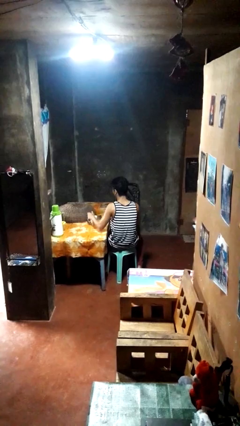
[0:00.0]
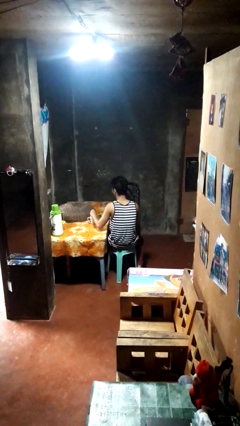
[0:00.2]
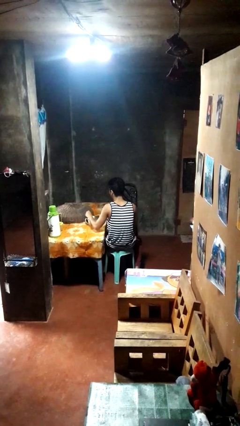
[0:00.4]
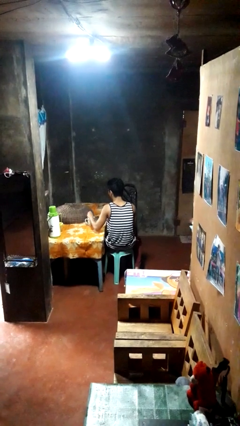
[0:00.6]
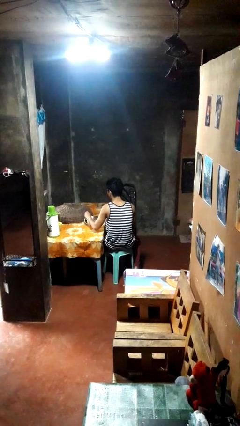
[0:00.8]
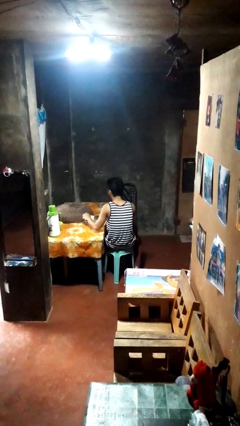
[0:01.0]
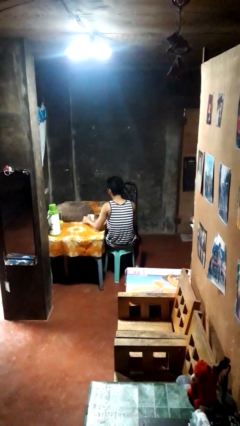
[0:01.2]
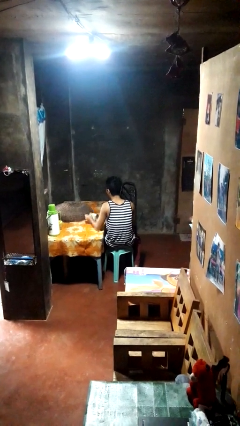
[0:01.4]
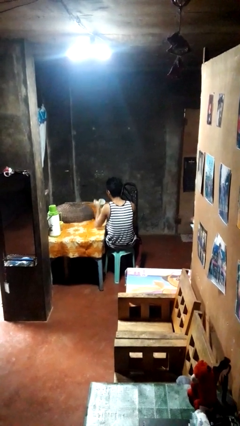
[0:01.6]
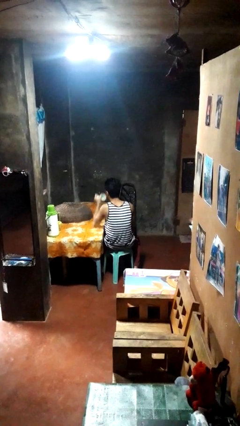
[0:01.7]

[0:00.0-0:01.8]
person stirs mug

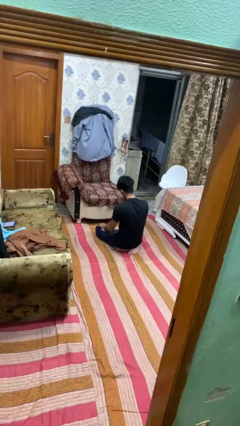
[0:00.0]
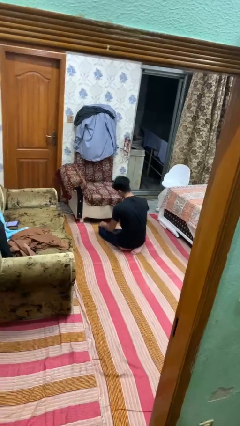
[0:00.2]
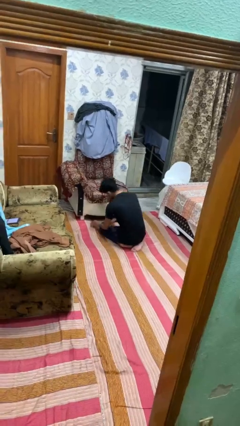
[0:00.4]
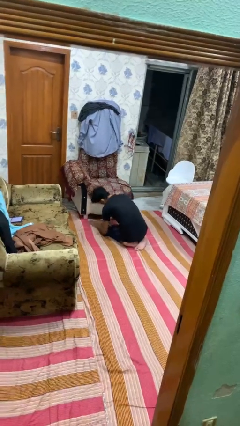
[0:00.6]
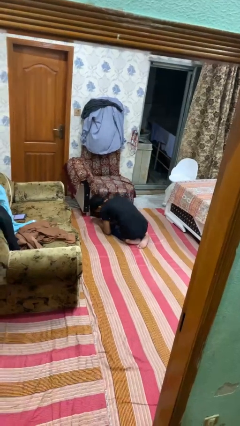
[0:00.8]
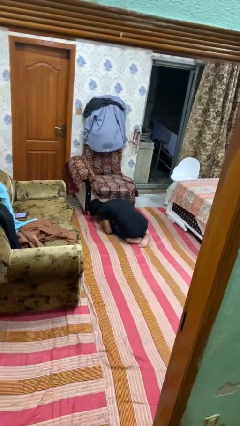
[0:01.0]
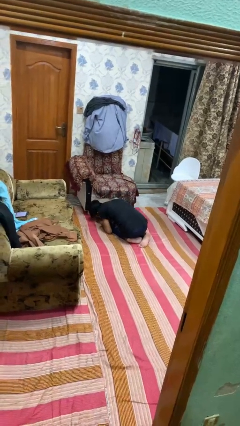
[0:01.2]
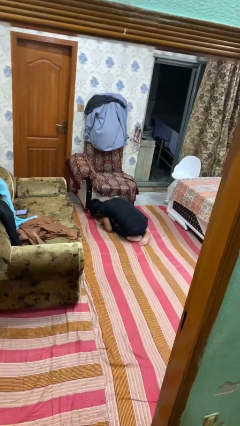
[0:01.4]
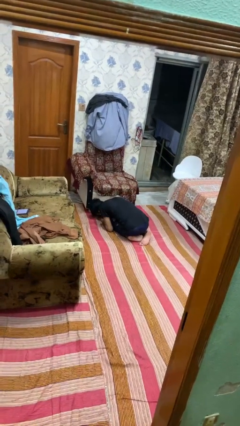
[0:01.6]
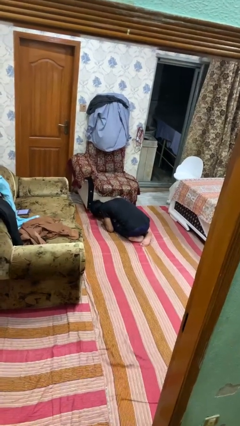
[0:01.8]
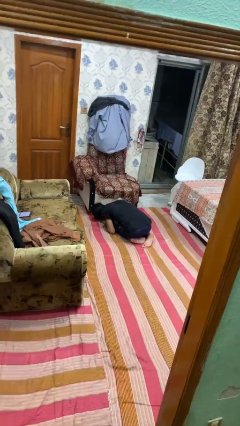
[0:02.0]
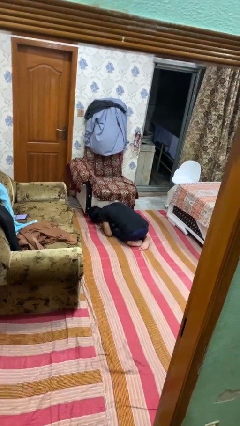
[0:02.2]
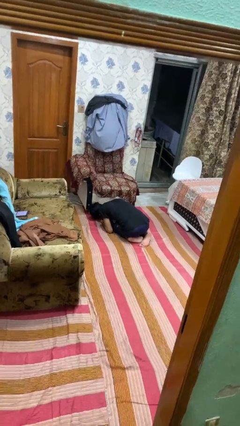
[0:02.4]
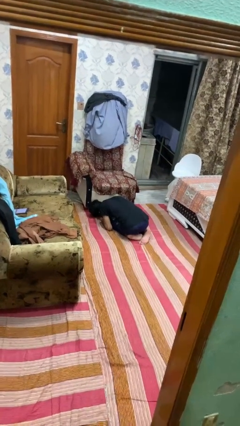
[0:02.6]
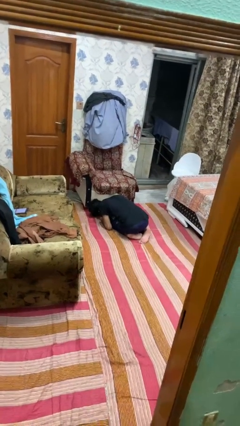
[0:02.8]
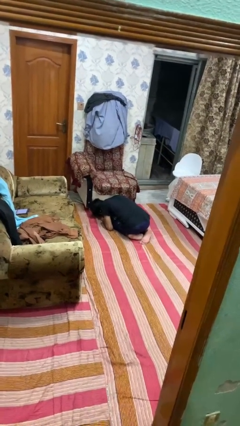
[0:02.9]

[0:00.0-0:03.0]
person searches under couch

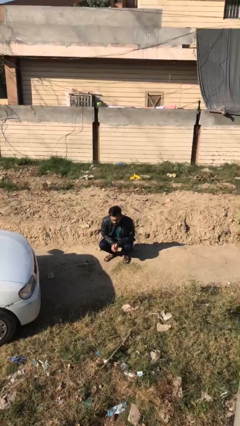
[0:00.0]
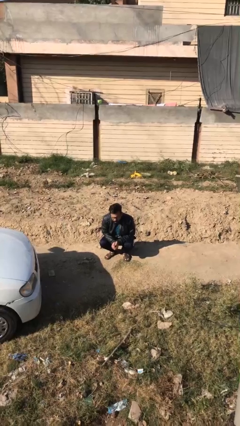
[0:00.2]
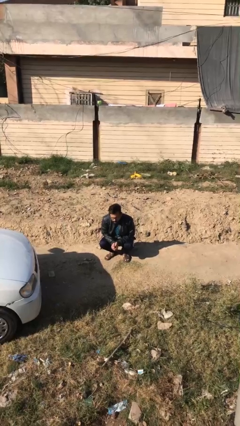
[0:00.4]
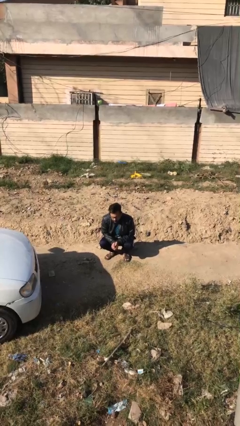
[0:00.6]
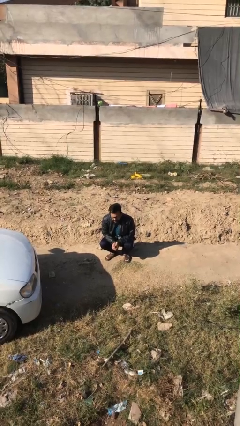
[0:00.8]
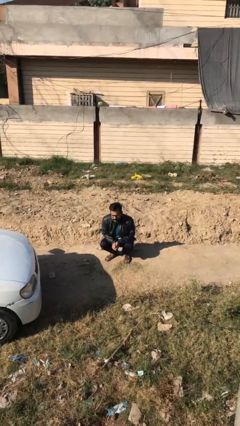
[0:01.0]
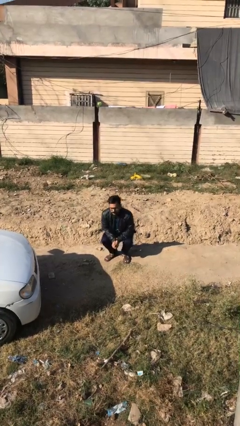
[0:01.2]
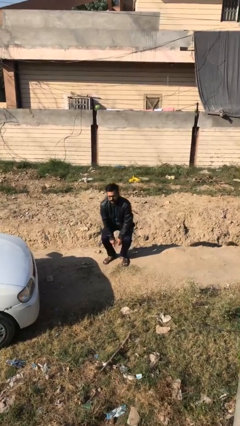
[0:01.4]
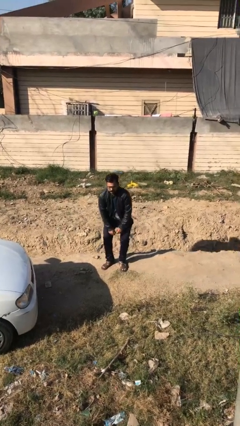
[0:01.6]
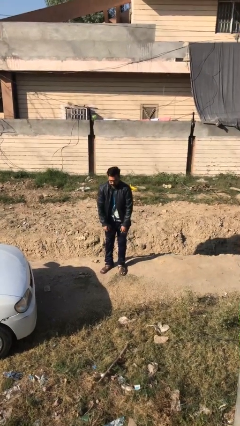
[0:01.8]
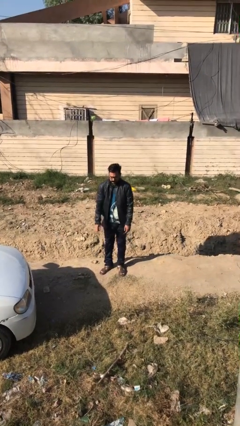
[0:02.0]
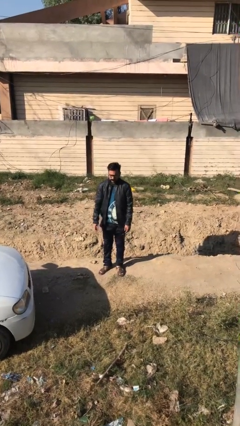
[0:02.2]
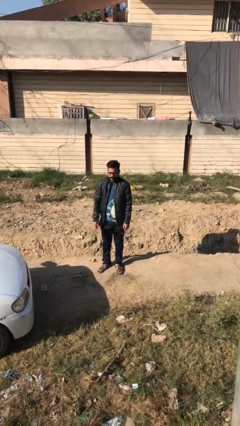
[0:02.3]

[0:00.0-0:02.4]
person stands up

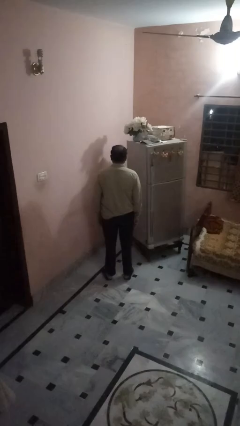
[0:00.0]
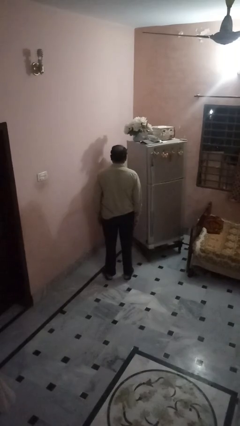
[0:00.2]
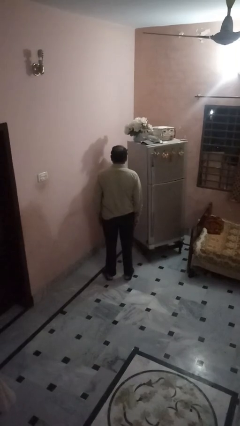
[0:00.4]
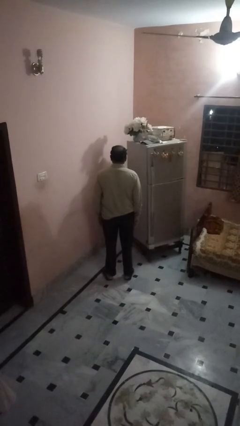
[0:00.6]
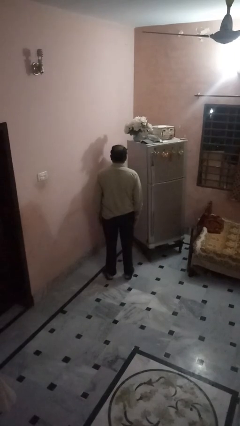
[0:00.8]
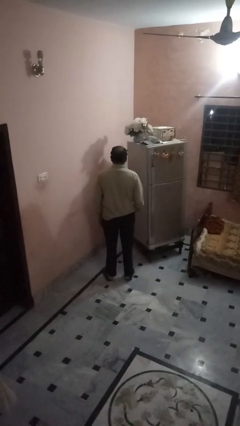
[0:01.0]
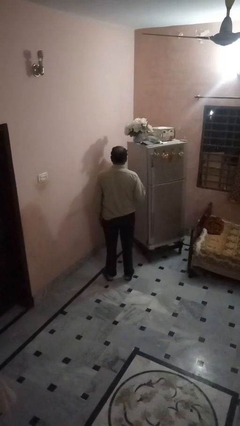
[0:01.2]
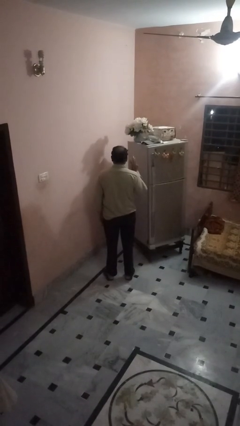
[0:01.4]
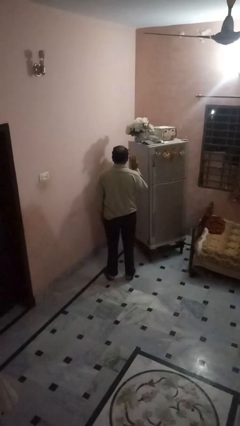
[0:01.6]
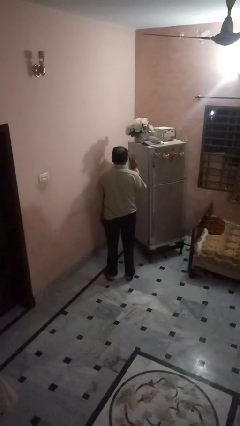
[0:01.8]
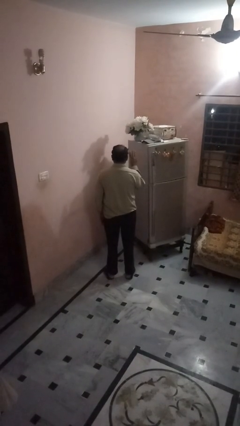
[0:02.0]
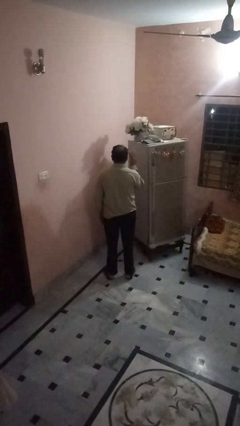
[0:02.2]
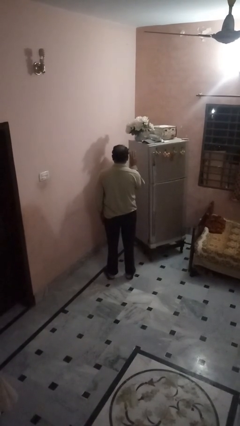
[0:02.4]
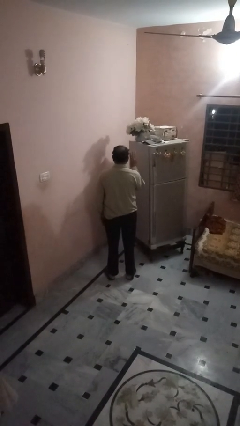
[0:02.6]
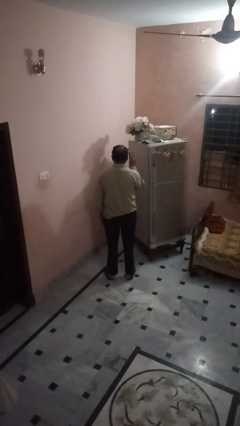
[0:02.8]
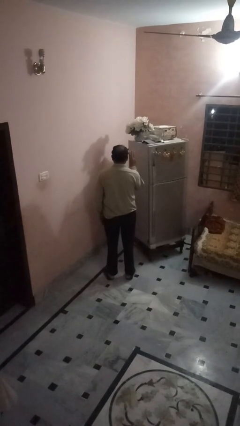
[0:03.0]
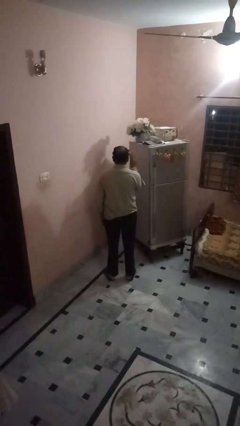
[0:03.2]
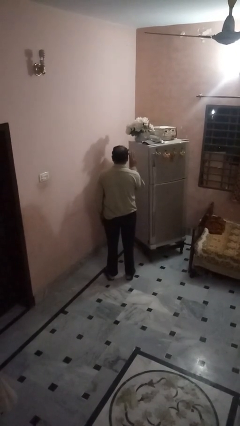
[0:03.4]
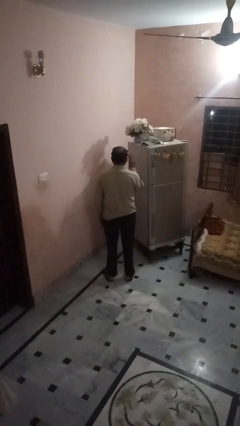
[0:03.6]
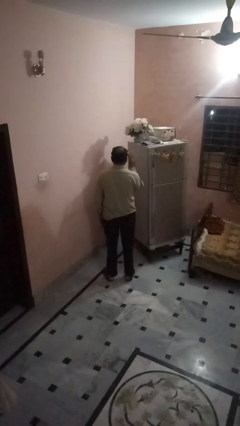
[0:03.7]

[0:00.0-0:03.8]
person gestures number three

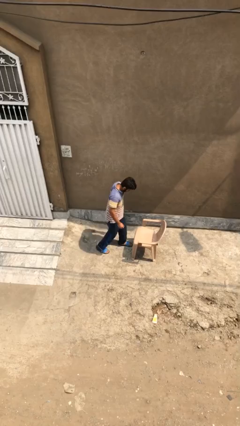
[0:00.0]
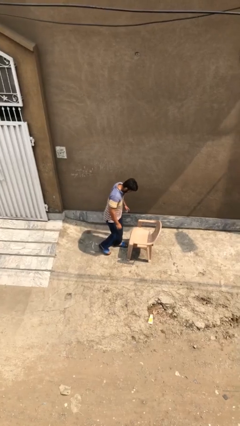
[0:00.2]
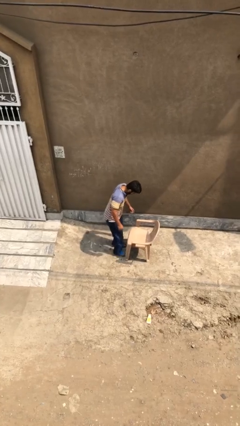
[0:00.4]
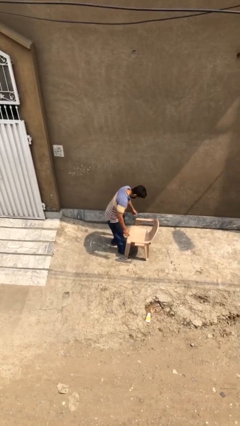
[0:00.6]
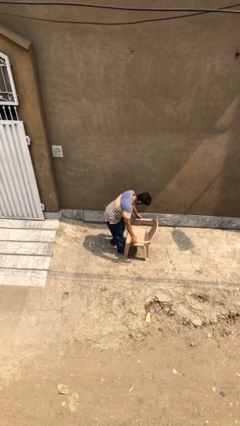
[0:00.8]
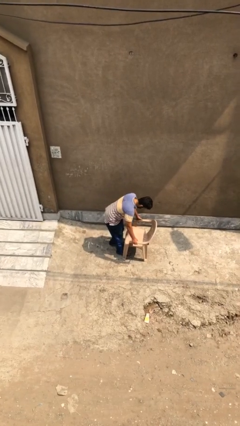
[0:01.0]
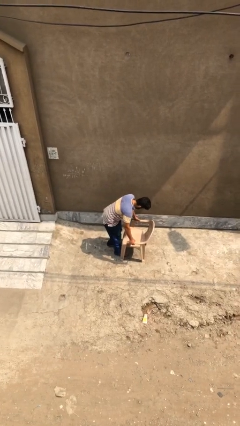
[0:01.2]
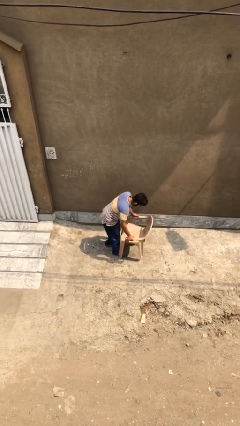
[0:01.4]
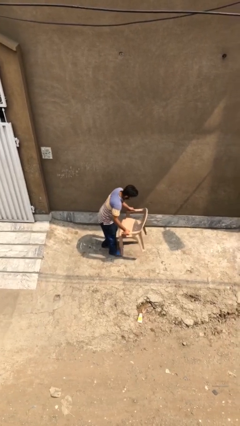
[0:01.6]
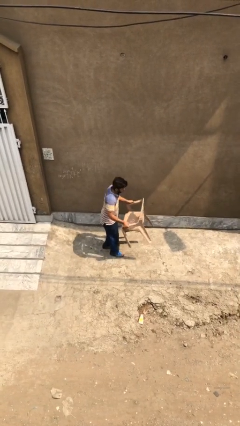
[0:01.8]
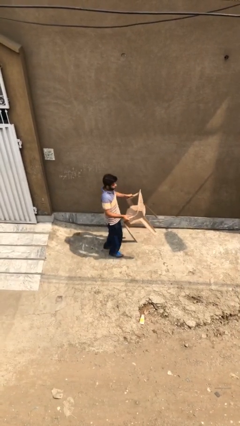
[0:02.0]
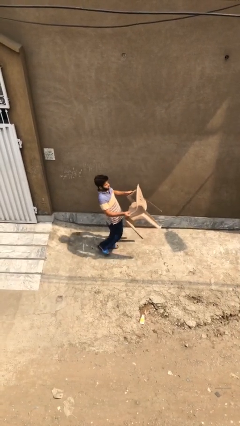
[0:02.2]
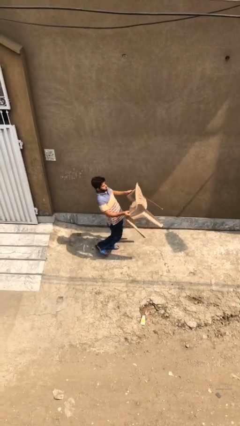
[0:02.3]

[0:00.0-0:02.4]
person picks up object from floor

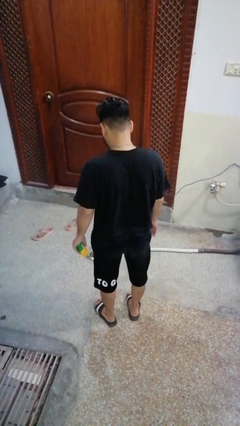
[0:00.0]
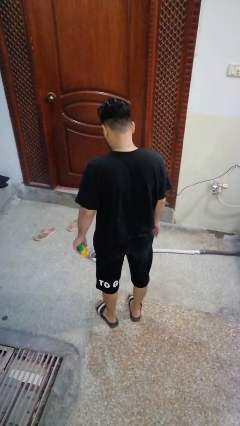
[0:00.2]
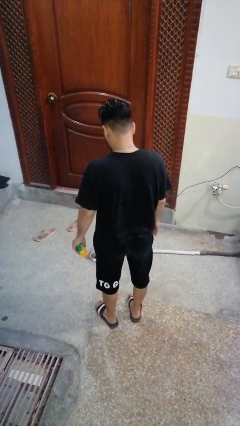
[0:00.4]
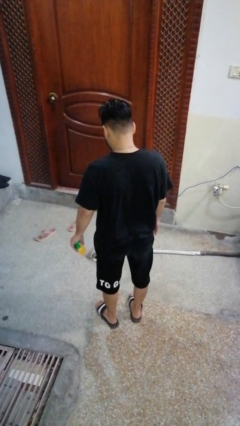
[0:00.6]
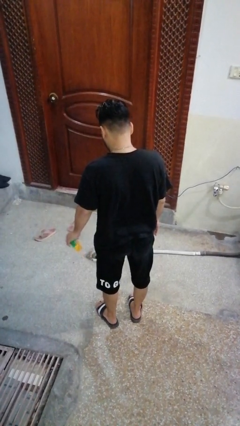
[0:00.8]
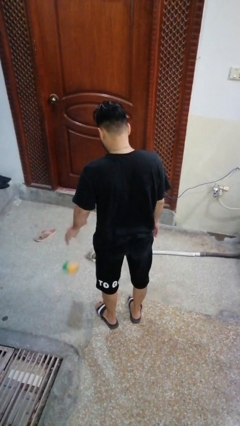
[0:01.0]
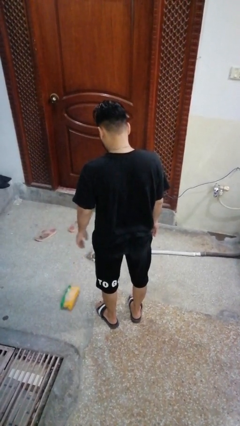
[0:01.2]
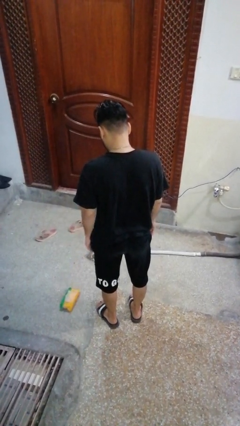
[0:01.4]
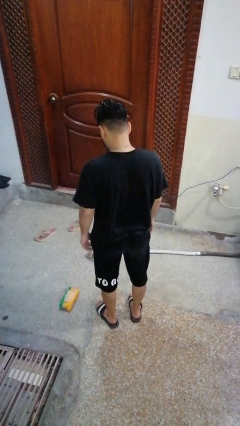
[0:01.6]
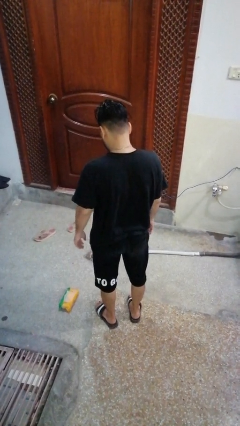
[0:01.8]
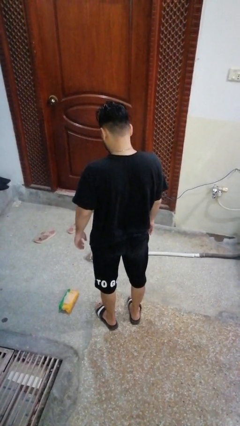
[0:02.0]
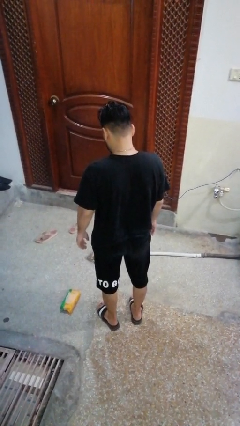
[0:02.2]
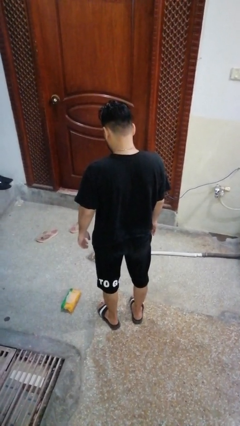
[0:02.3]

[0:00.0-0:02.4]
person drops object

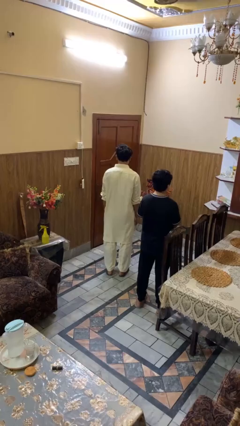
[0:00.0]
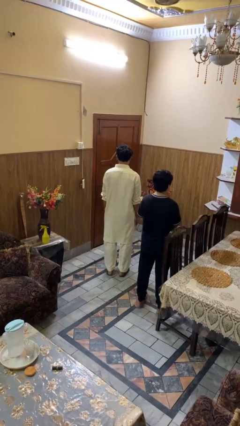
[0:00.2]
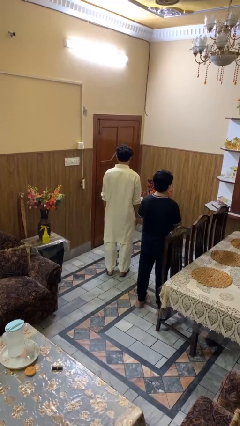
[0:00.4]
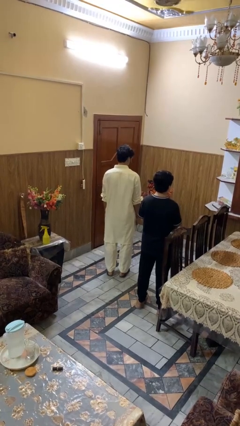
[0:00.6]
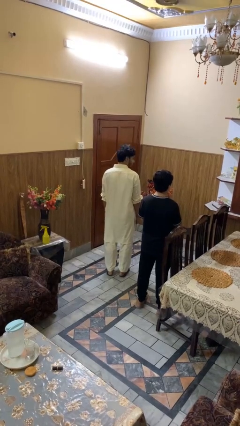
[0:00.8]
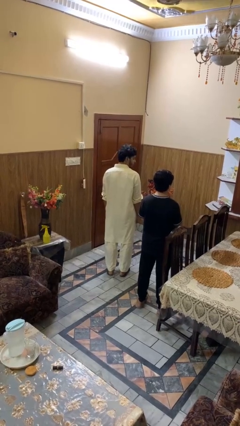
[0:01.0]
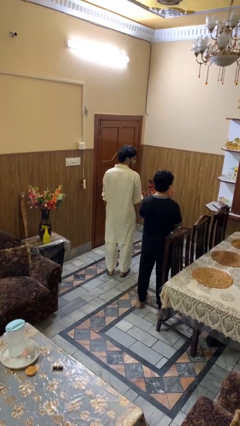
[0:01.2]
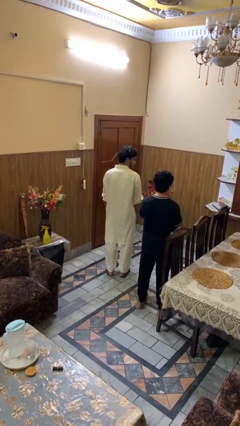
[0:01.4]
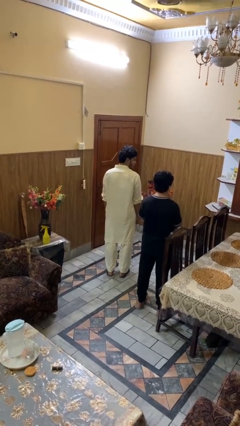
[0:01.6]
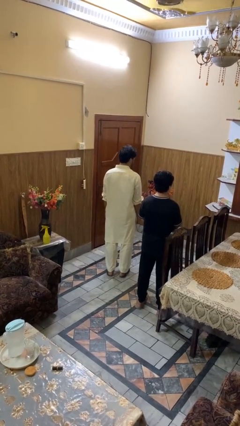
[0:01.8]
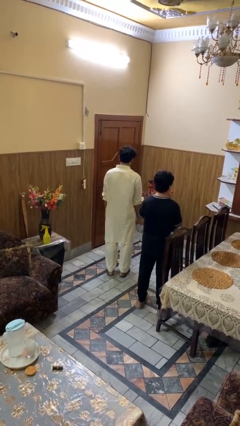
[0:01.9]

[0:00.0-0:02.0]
person looks over shoulder
